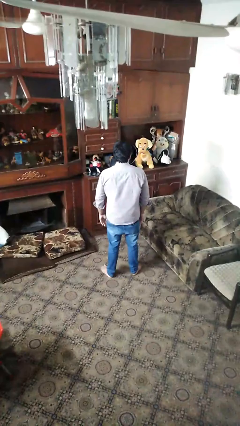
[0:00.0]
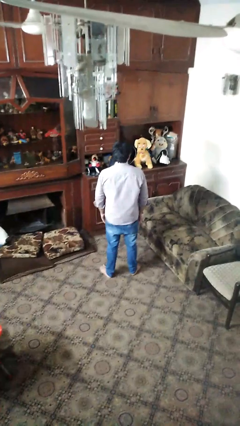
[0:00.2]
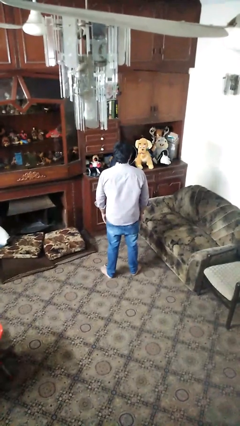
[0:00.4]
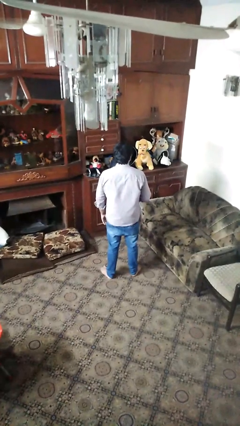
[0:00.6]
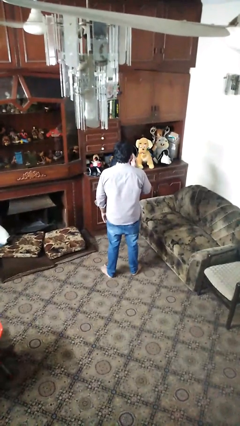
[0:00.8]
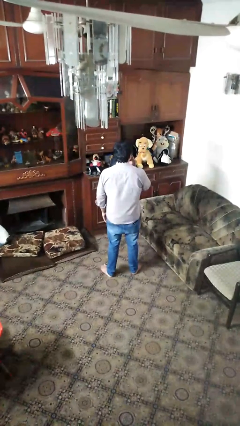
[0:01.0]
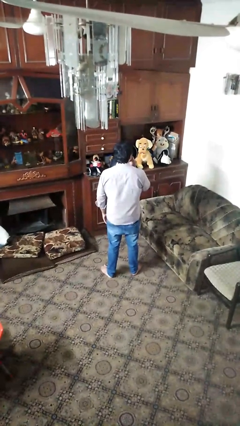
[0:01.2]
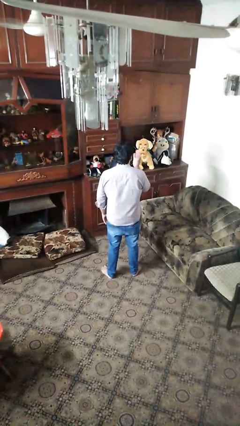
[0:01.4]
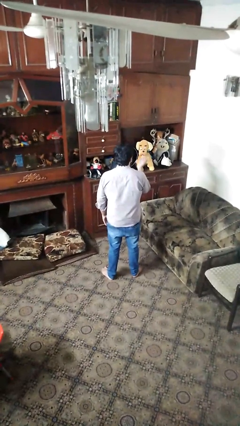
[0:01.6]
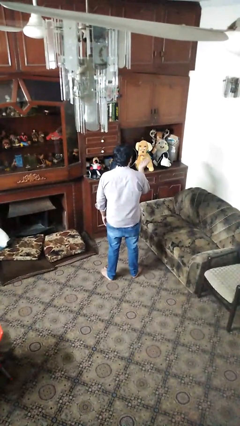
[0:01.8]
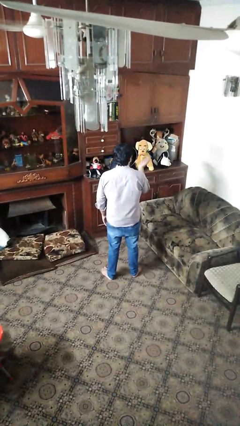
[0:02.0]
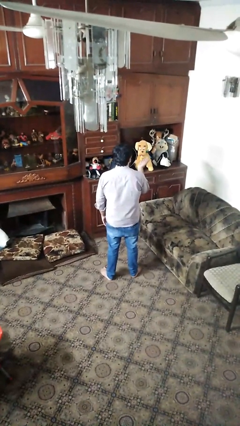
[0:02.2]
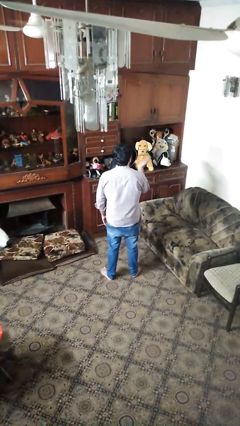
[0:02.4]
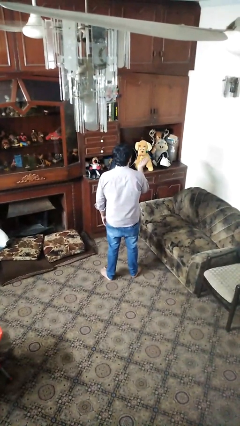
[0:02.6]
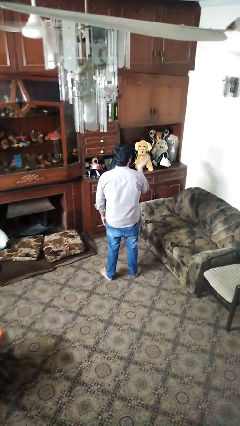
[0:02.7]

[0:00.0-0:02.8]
person gestures blow kiss

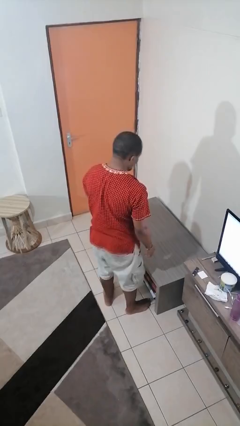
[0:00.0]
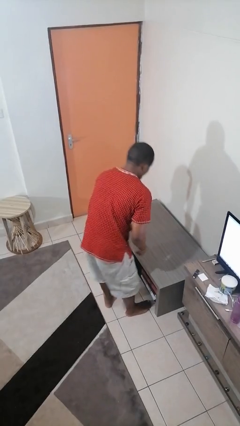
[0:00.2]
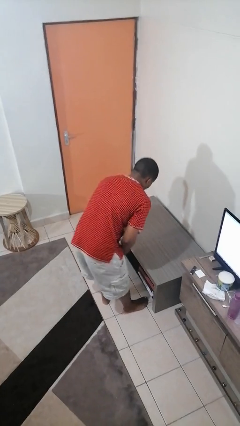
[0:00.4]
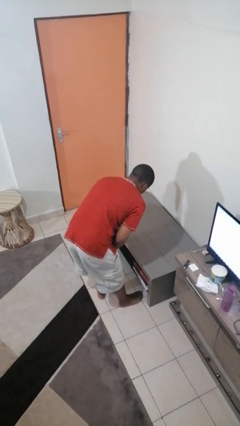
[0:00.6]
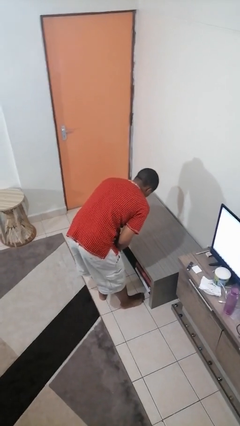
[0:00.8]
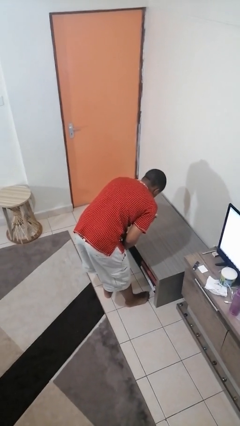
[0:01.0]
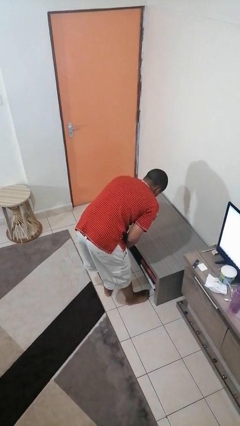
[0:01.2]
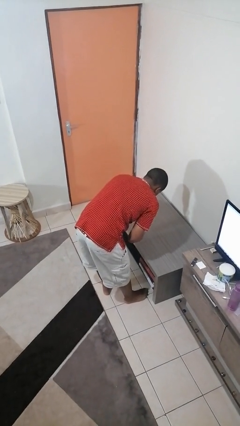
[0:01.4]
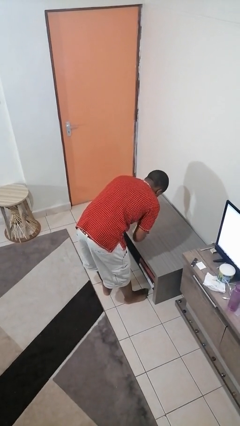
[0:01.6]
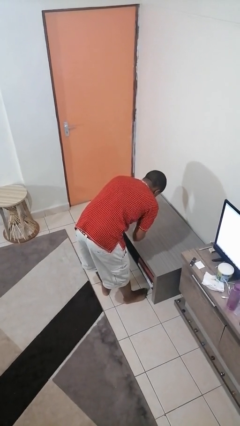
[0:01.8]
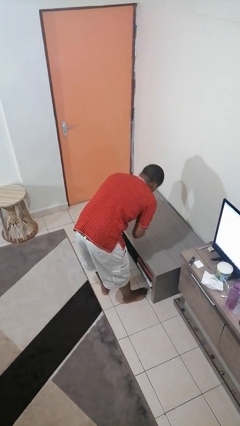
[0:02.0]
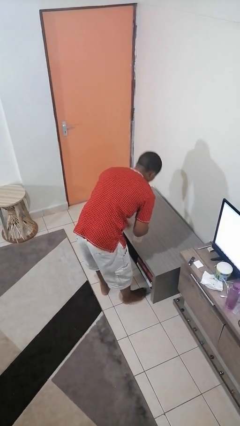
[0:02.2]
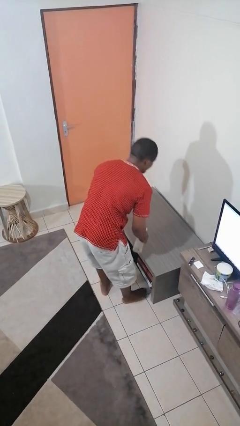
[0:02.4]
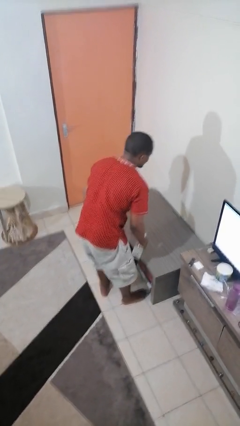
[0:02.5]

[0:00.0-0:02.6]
person sprays from bottle

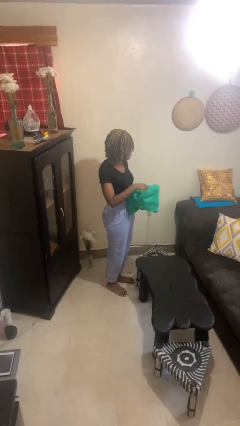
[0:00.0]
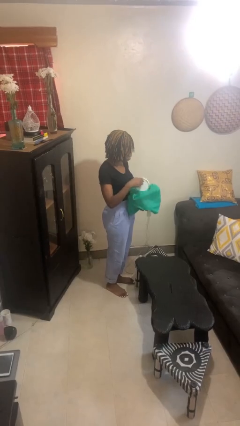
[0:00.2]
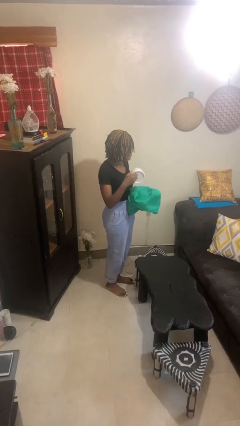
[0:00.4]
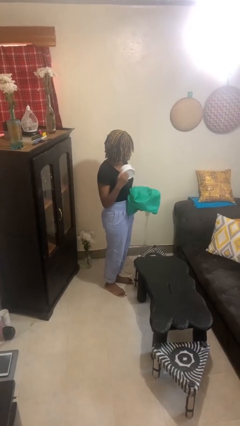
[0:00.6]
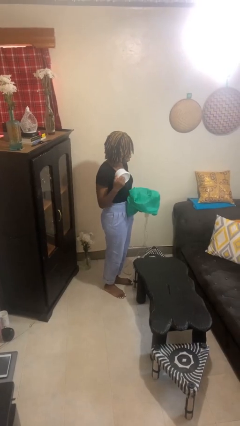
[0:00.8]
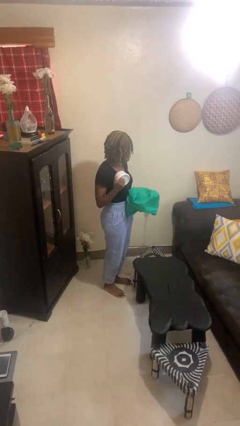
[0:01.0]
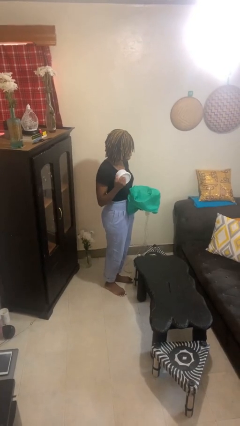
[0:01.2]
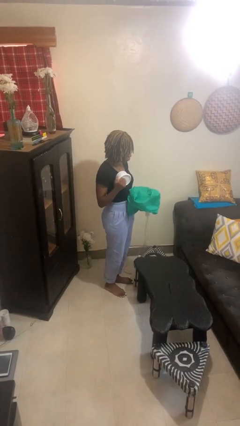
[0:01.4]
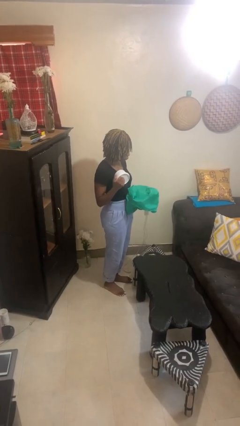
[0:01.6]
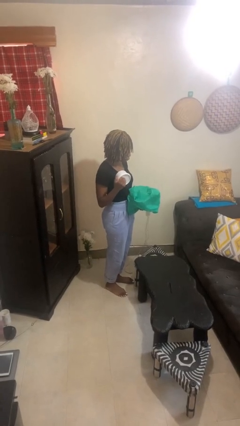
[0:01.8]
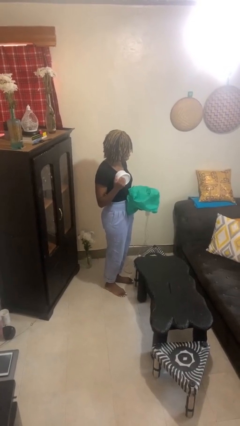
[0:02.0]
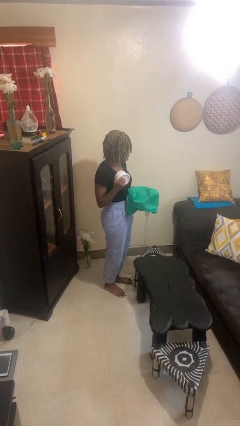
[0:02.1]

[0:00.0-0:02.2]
person takes object from bag

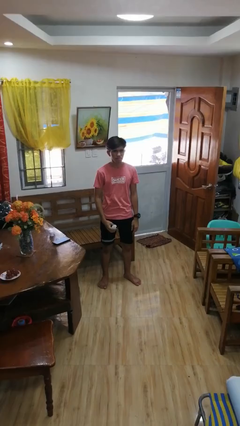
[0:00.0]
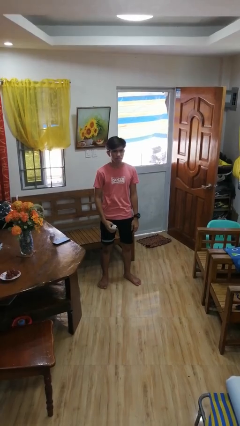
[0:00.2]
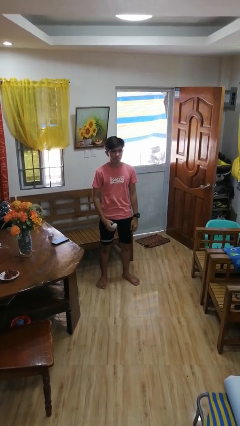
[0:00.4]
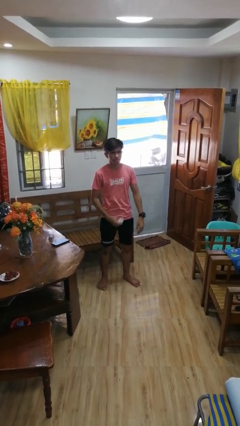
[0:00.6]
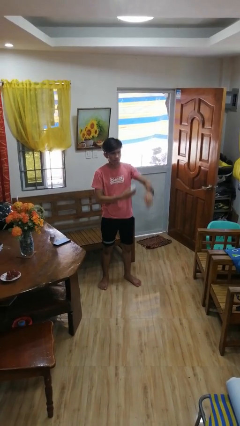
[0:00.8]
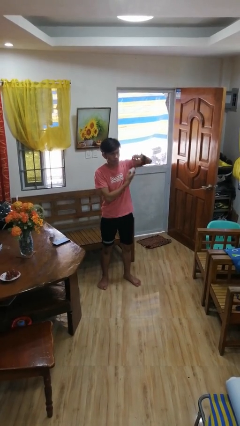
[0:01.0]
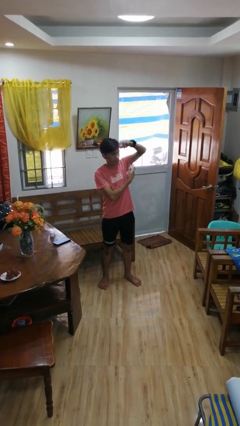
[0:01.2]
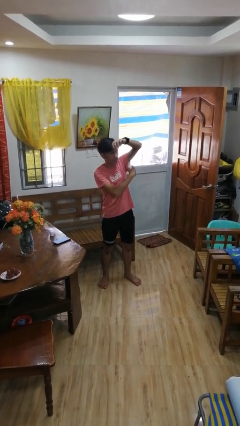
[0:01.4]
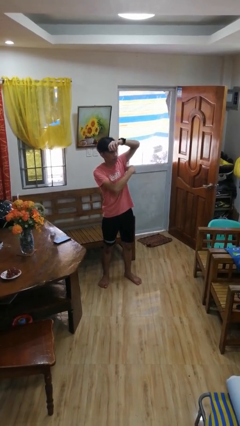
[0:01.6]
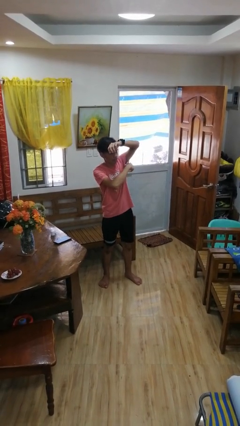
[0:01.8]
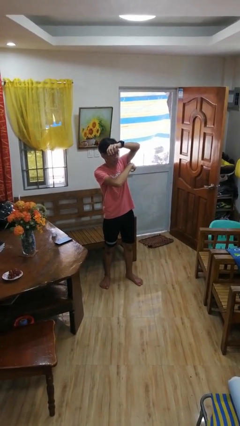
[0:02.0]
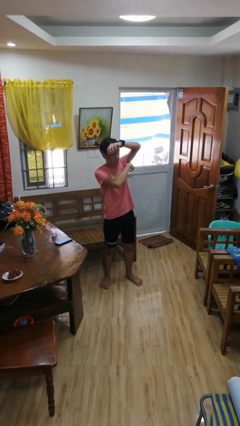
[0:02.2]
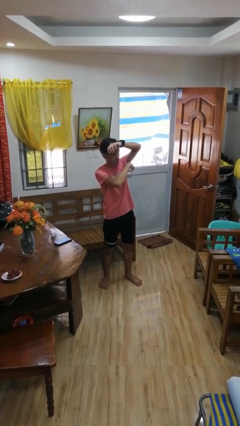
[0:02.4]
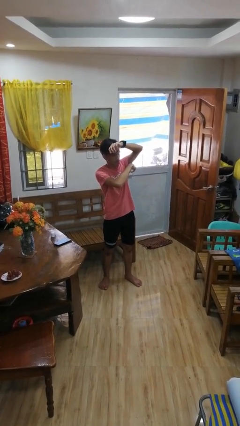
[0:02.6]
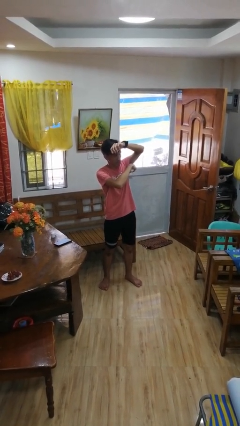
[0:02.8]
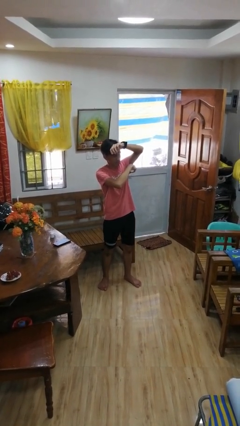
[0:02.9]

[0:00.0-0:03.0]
person applies deodorant

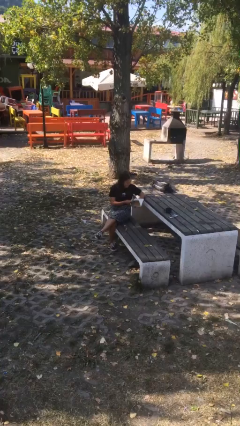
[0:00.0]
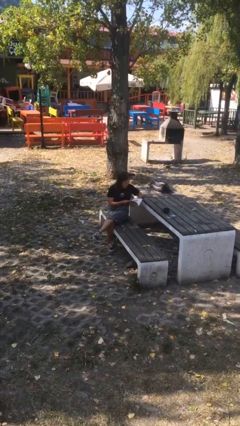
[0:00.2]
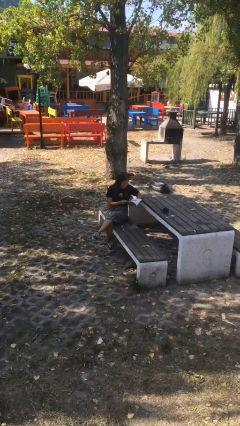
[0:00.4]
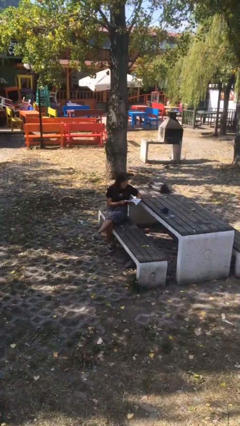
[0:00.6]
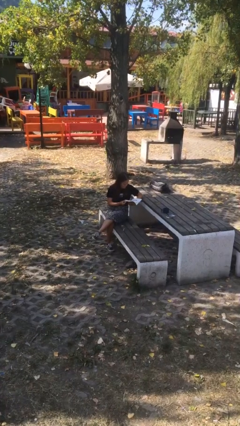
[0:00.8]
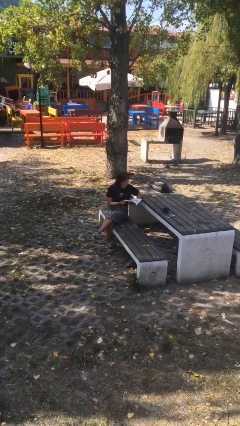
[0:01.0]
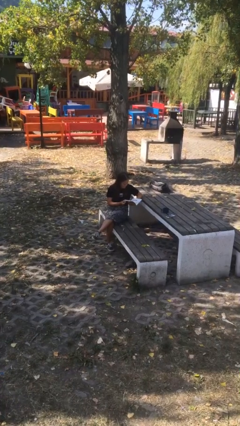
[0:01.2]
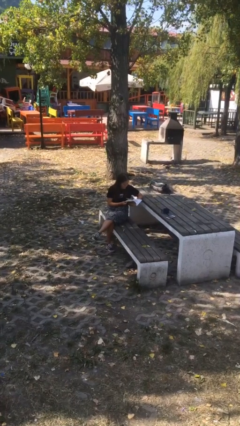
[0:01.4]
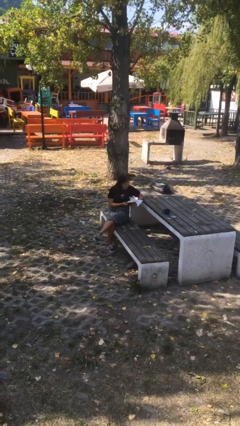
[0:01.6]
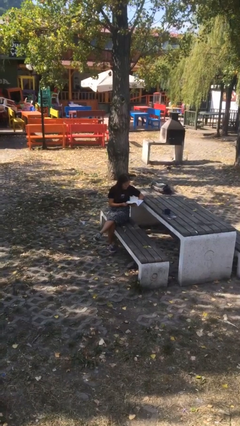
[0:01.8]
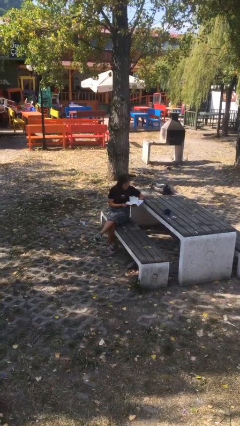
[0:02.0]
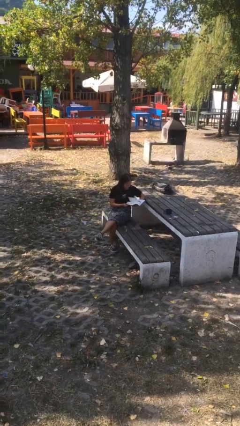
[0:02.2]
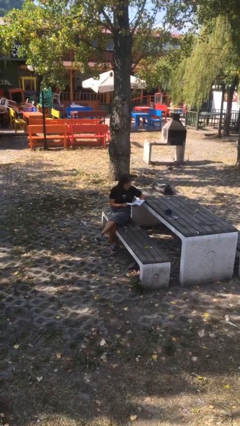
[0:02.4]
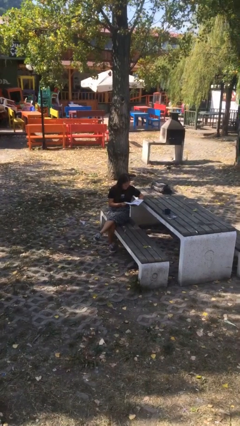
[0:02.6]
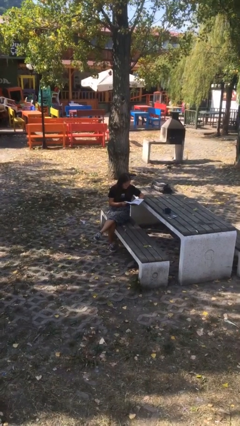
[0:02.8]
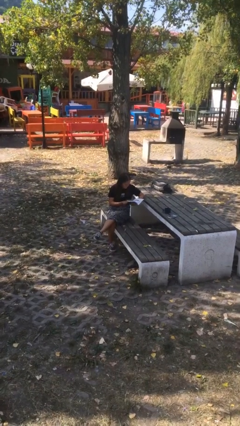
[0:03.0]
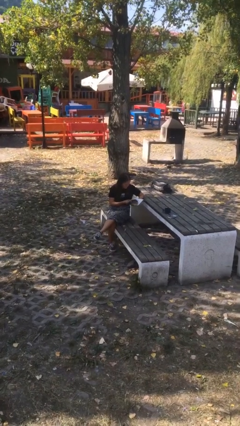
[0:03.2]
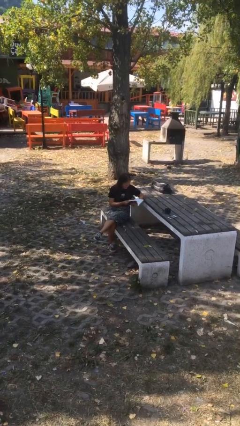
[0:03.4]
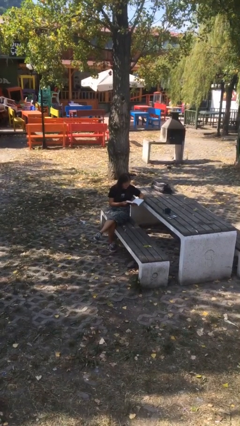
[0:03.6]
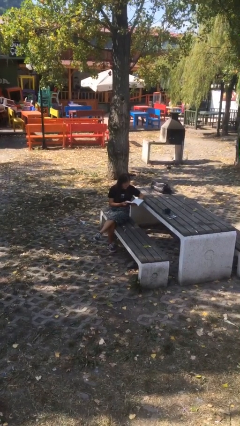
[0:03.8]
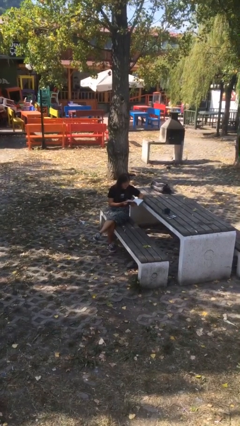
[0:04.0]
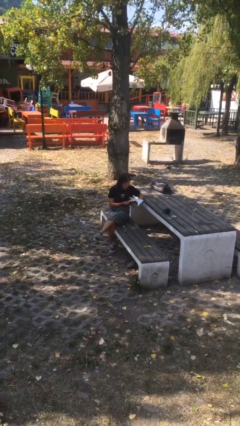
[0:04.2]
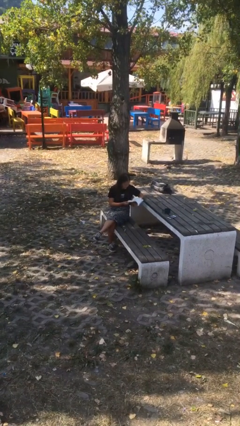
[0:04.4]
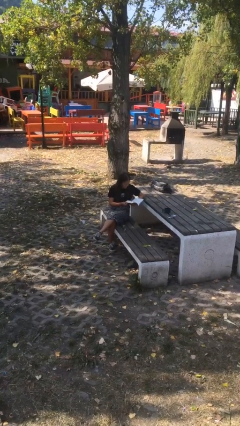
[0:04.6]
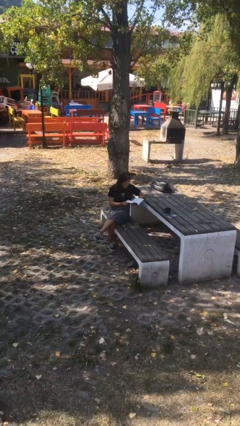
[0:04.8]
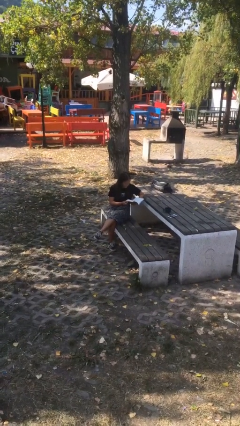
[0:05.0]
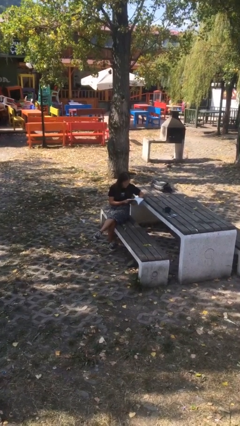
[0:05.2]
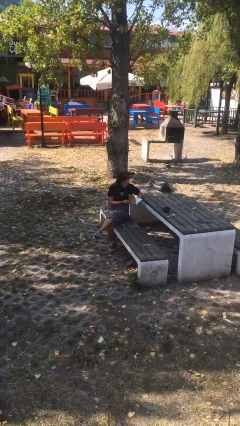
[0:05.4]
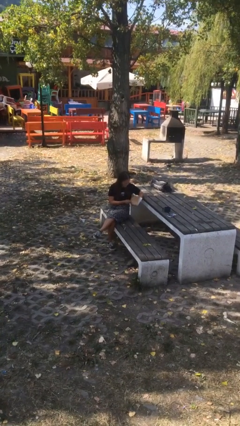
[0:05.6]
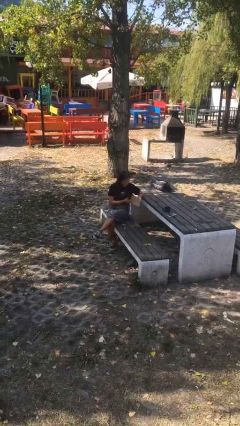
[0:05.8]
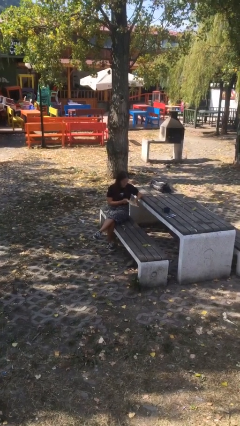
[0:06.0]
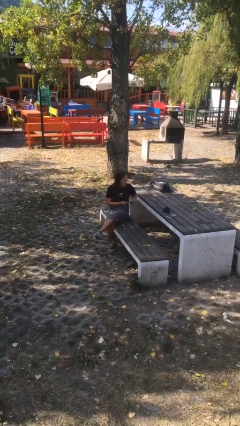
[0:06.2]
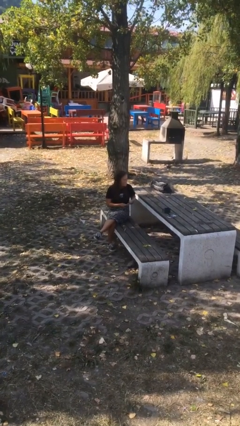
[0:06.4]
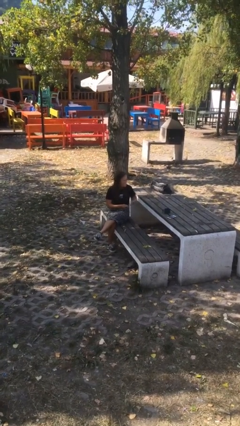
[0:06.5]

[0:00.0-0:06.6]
person reads document

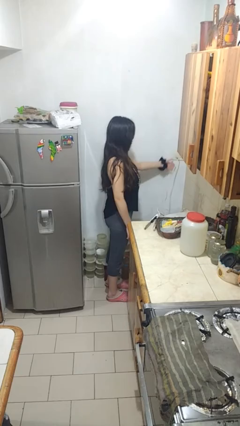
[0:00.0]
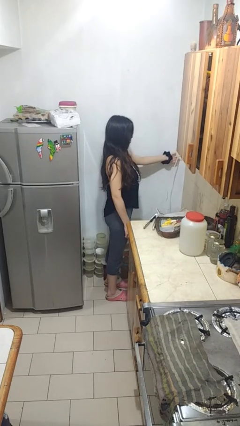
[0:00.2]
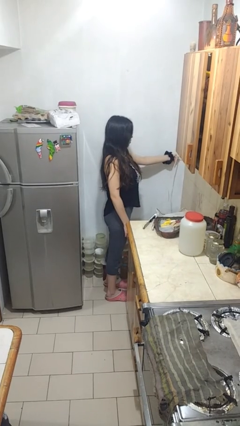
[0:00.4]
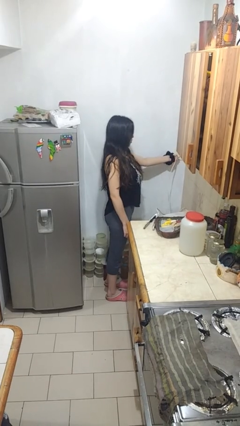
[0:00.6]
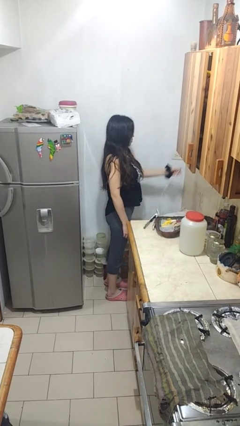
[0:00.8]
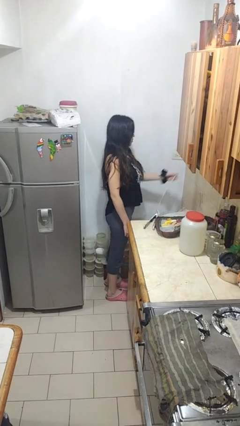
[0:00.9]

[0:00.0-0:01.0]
person unplugs from electrical socket
